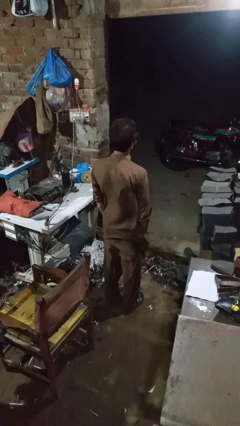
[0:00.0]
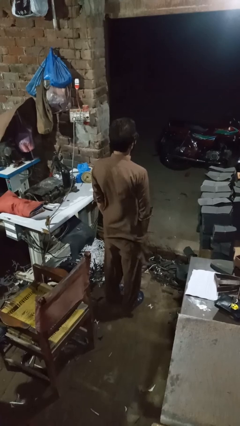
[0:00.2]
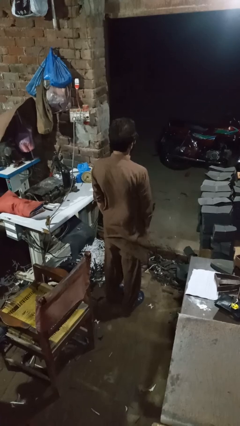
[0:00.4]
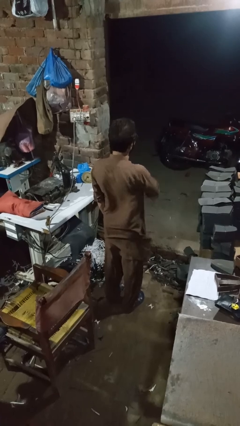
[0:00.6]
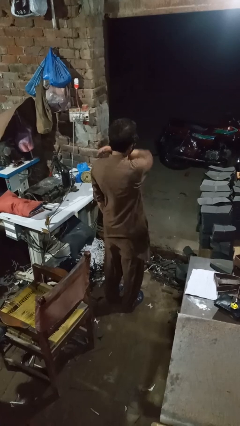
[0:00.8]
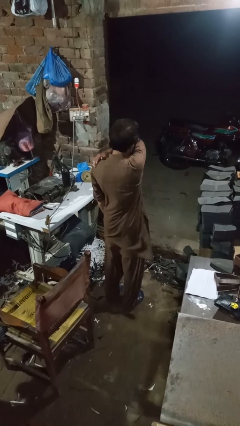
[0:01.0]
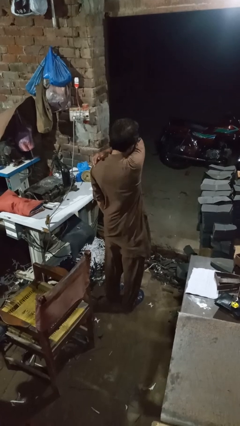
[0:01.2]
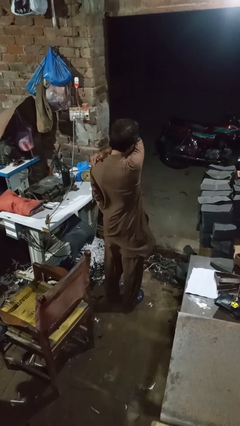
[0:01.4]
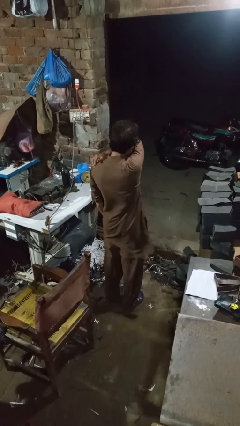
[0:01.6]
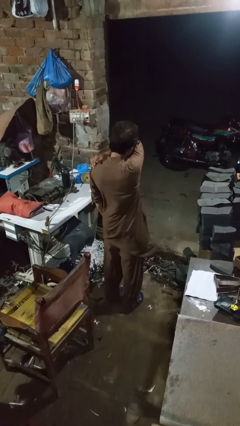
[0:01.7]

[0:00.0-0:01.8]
person sneezes into arm

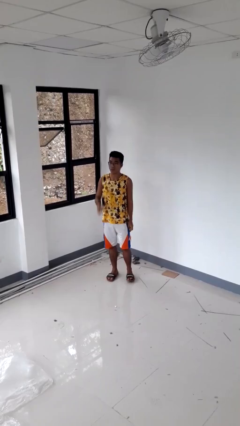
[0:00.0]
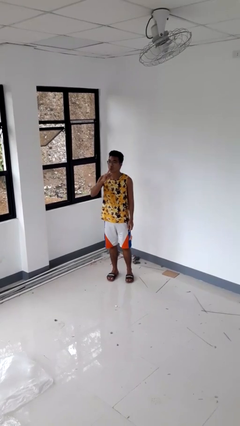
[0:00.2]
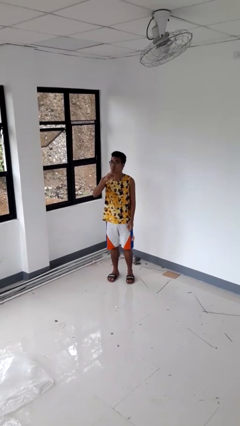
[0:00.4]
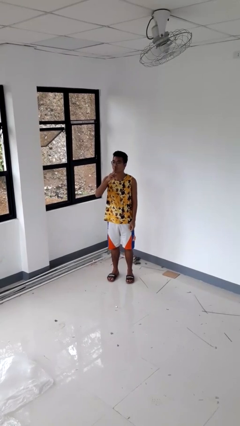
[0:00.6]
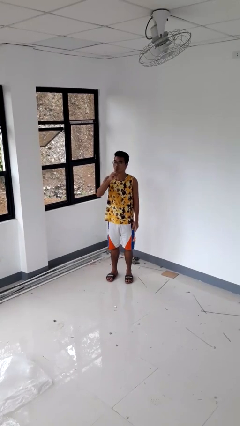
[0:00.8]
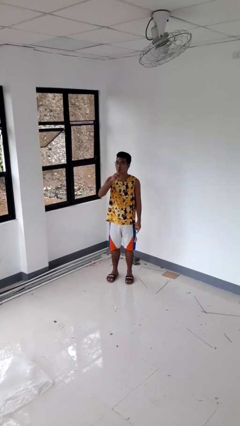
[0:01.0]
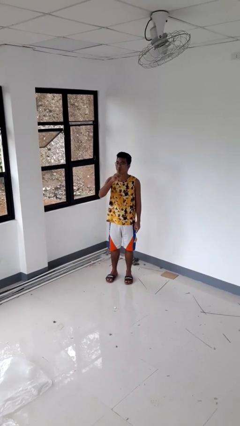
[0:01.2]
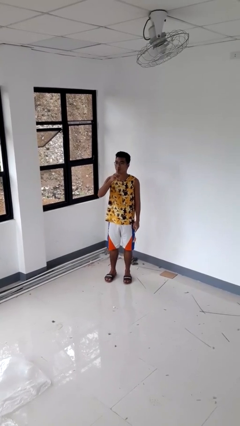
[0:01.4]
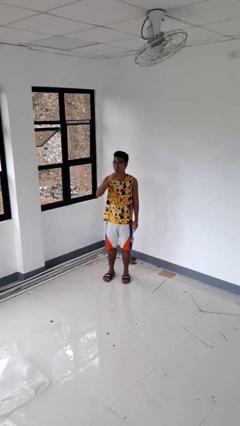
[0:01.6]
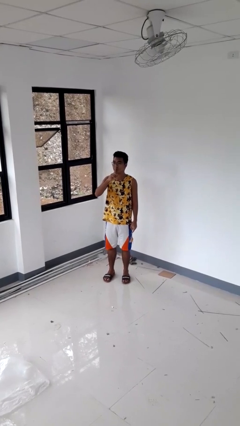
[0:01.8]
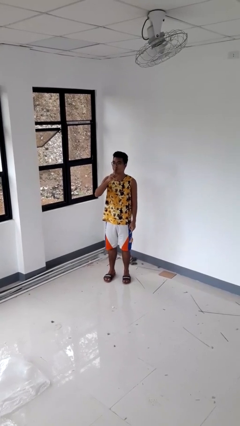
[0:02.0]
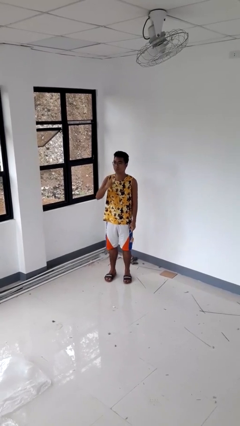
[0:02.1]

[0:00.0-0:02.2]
person gestures be quiet

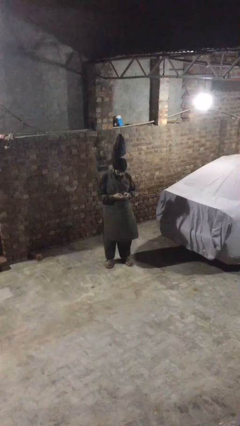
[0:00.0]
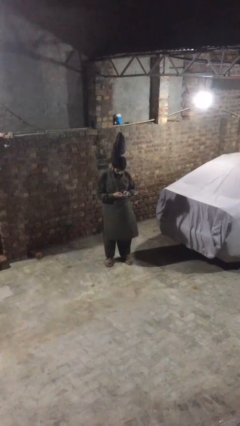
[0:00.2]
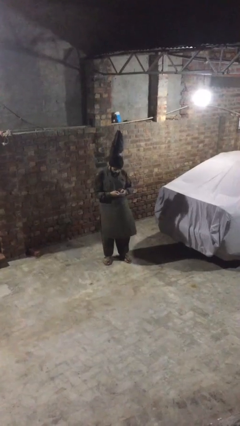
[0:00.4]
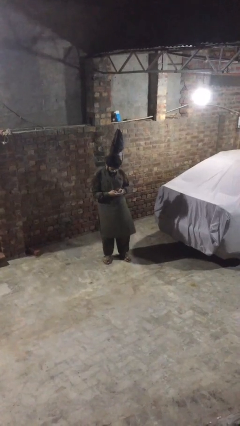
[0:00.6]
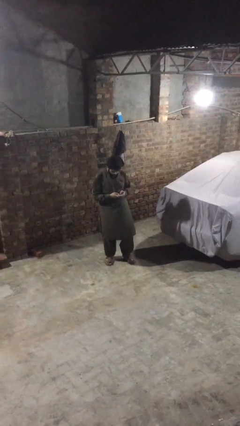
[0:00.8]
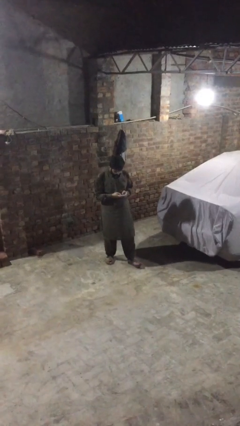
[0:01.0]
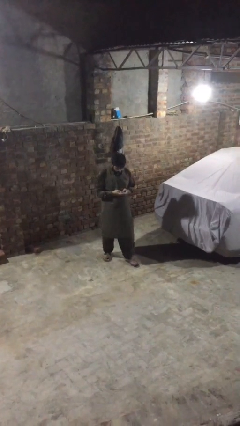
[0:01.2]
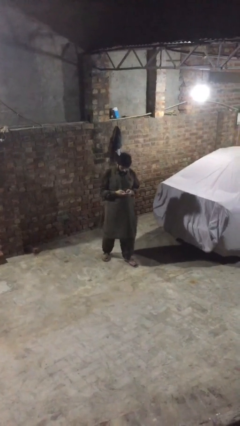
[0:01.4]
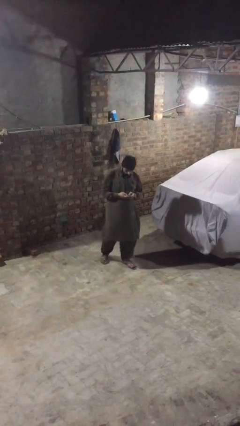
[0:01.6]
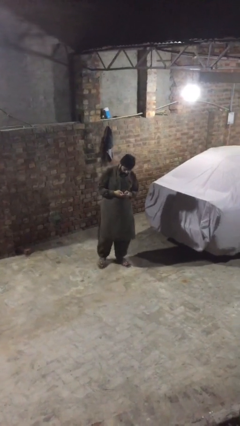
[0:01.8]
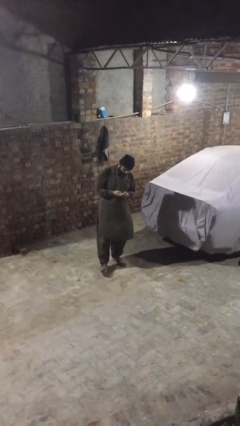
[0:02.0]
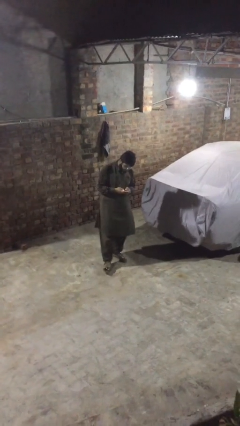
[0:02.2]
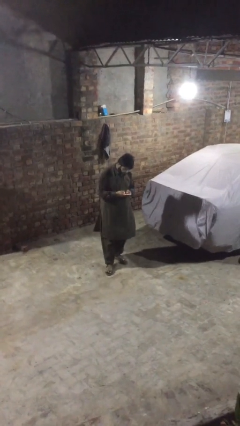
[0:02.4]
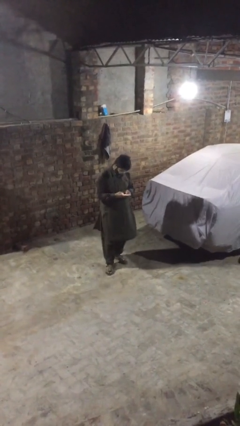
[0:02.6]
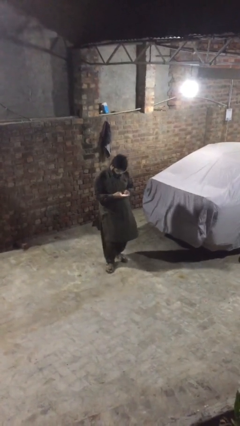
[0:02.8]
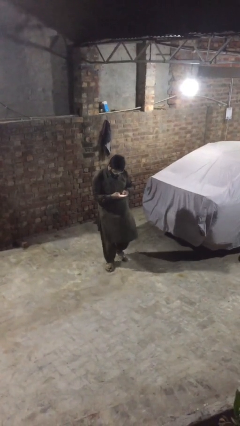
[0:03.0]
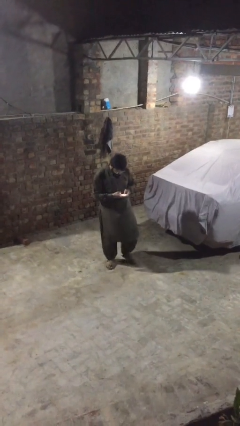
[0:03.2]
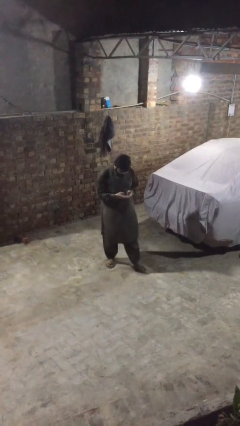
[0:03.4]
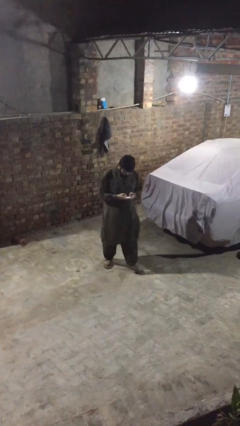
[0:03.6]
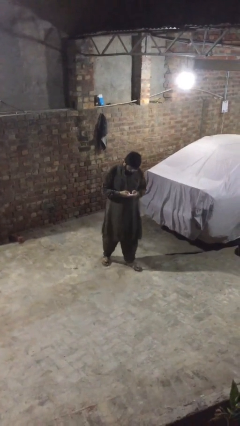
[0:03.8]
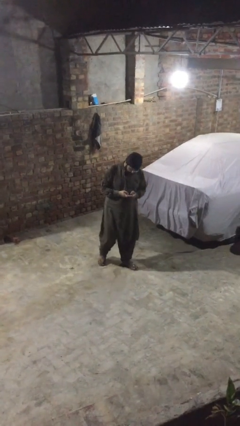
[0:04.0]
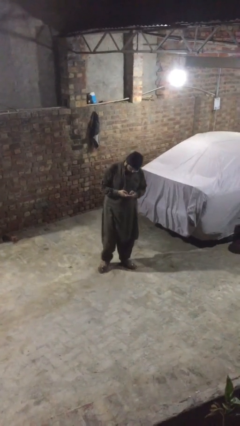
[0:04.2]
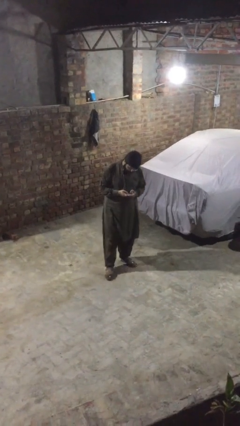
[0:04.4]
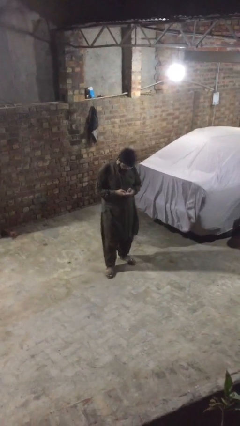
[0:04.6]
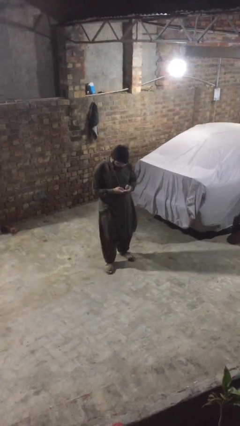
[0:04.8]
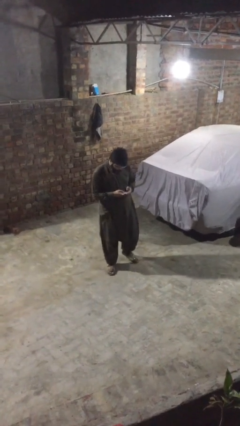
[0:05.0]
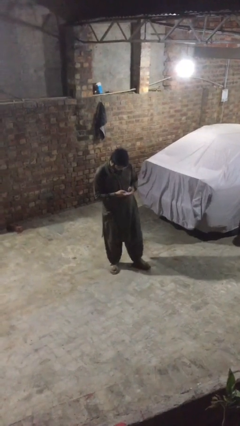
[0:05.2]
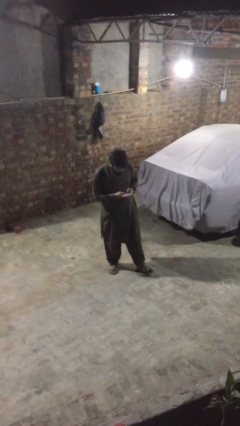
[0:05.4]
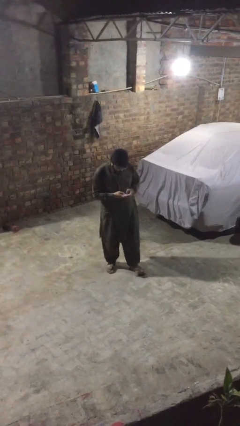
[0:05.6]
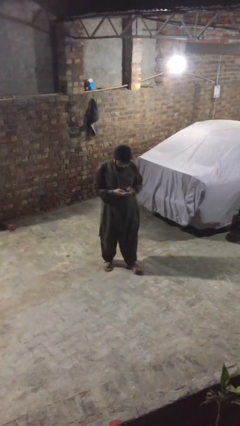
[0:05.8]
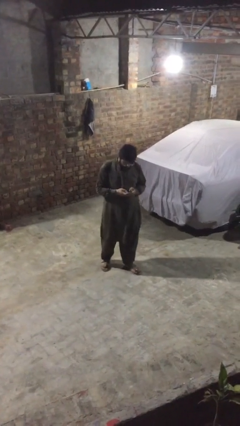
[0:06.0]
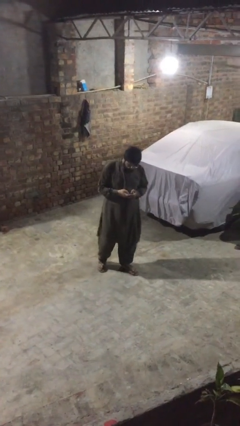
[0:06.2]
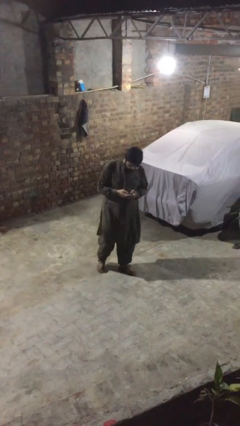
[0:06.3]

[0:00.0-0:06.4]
person texts on phone

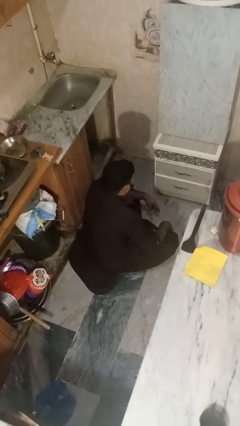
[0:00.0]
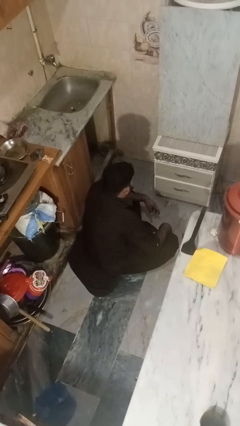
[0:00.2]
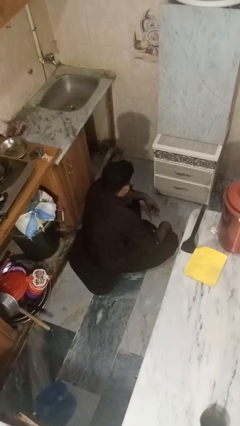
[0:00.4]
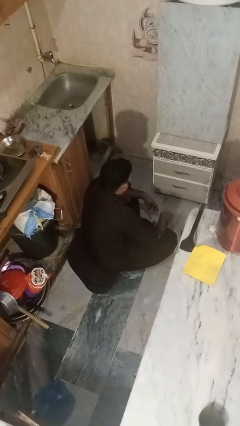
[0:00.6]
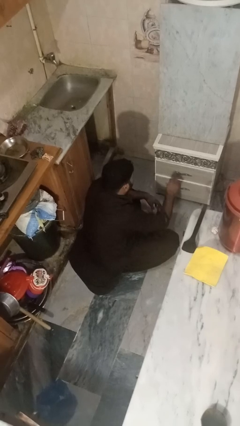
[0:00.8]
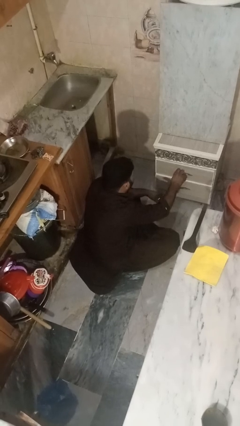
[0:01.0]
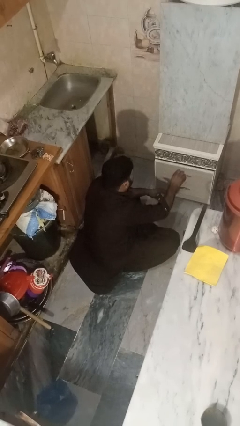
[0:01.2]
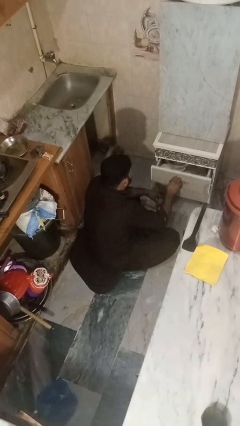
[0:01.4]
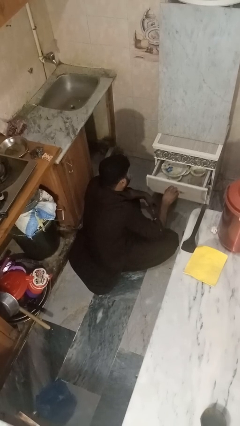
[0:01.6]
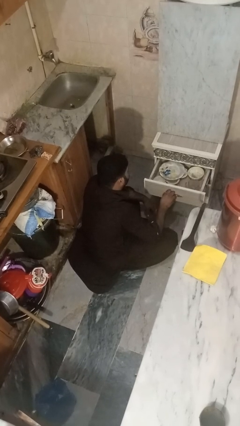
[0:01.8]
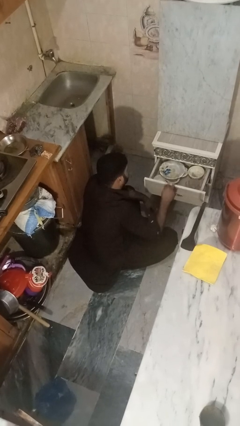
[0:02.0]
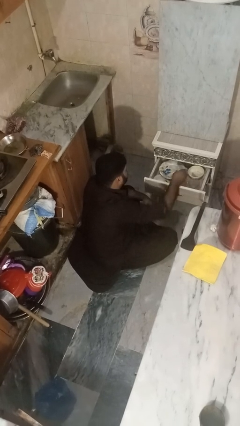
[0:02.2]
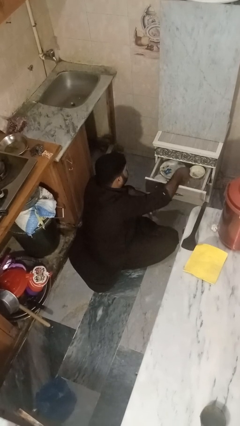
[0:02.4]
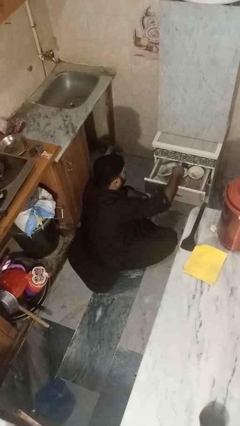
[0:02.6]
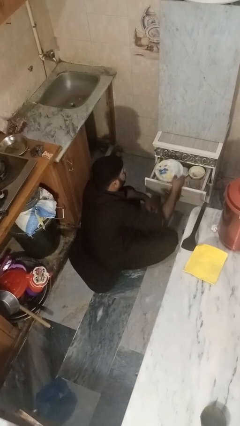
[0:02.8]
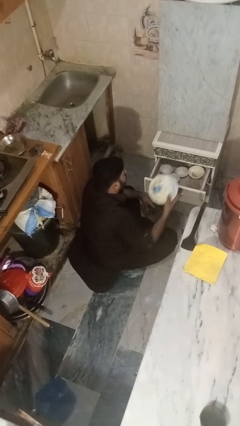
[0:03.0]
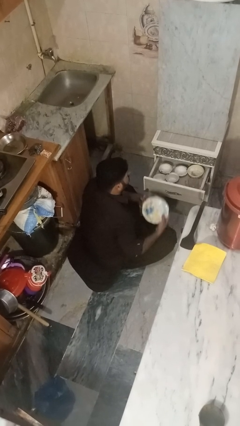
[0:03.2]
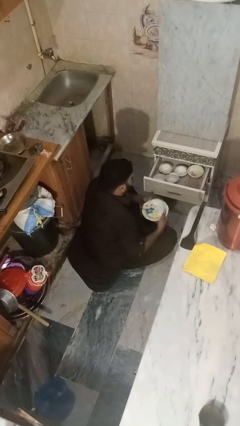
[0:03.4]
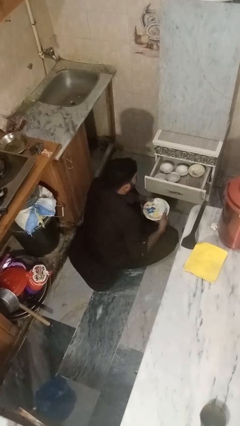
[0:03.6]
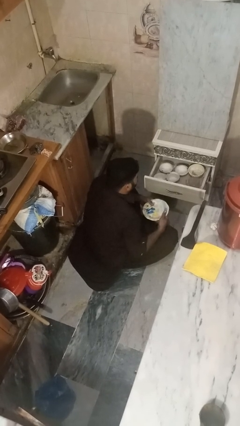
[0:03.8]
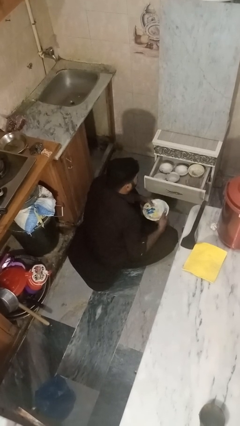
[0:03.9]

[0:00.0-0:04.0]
person takes object from kitchen drawer

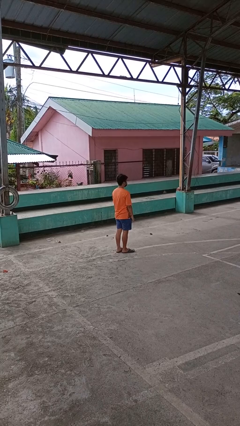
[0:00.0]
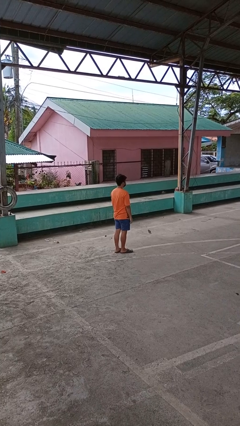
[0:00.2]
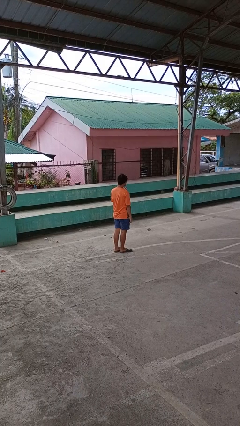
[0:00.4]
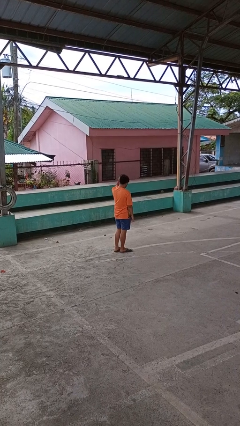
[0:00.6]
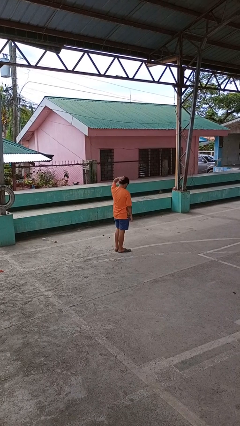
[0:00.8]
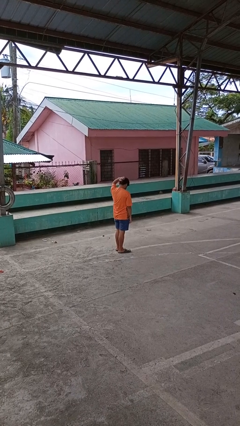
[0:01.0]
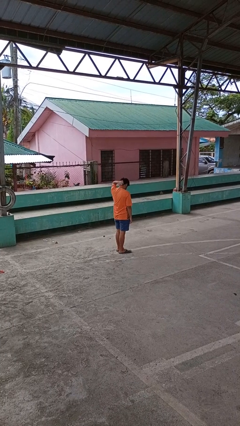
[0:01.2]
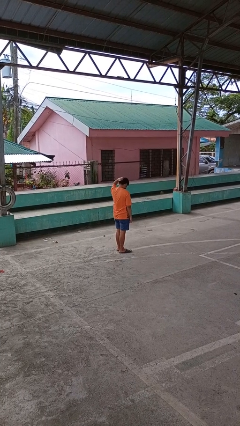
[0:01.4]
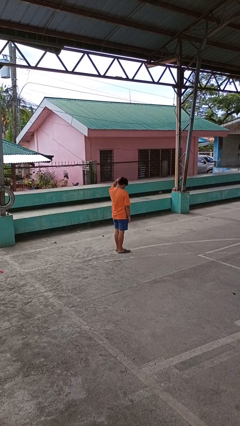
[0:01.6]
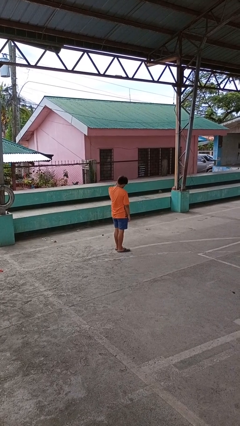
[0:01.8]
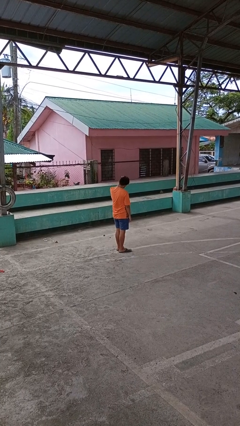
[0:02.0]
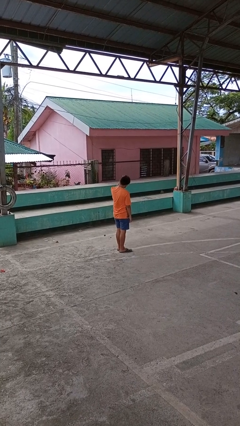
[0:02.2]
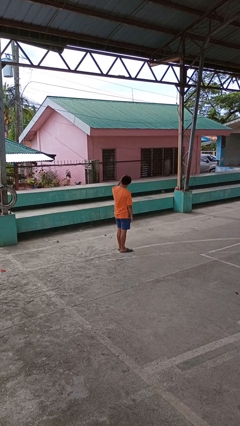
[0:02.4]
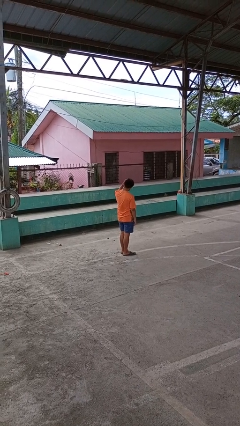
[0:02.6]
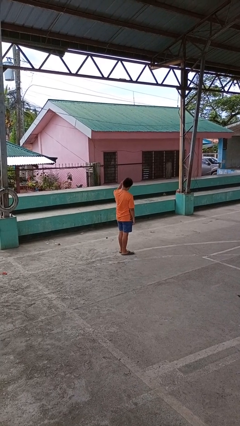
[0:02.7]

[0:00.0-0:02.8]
person scratches face

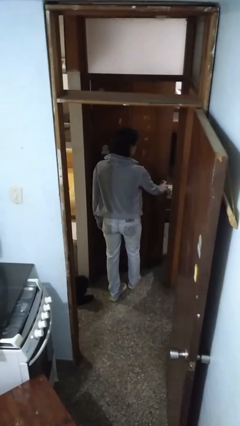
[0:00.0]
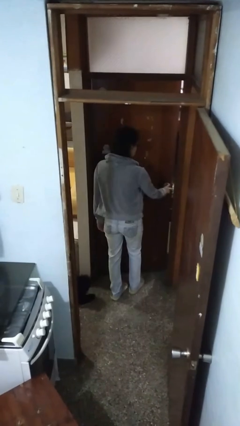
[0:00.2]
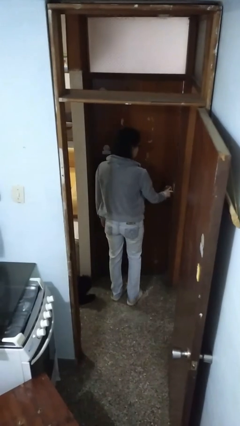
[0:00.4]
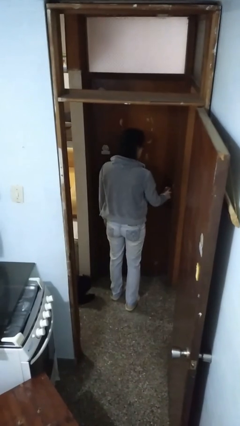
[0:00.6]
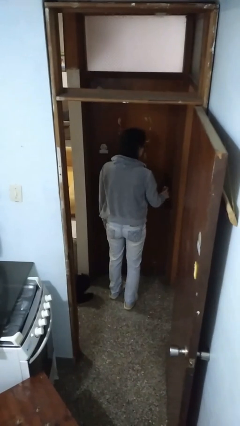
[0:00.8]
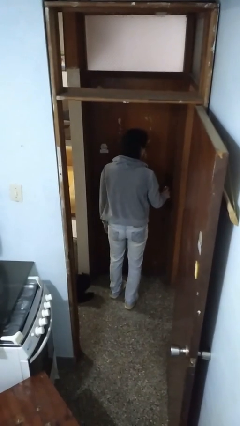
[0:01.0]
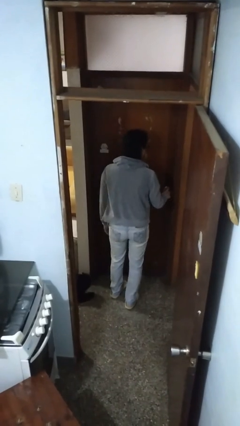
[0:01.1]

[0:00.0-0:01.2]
person closes facility door
